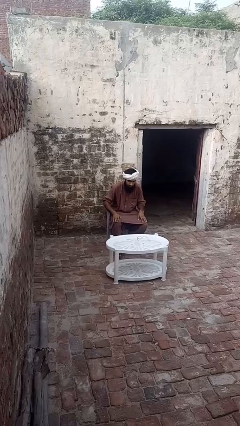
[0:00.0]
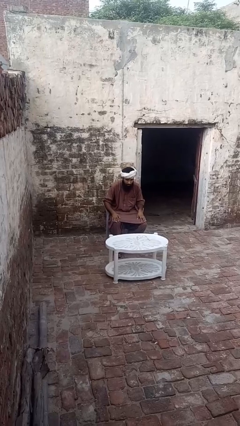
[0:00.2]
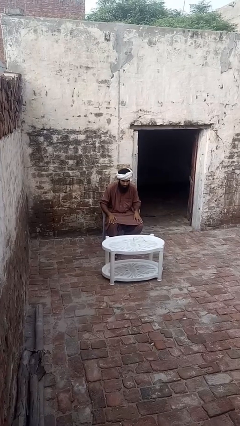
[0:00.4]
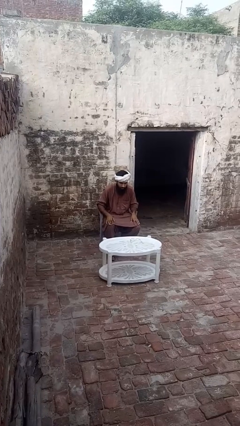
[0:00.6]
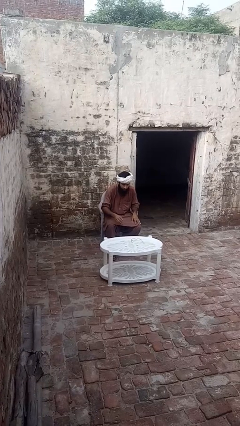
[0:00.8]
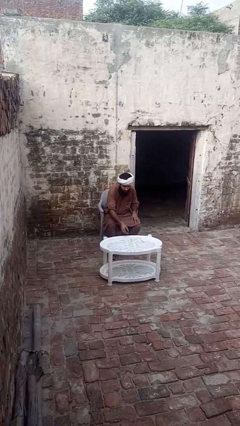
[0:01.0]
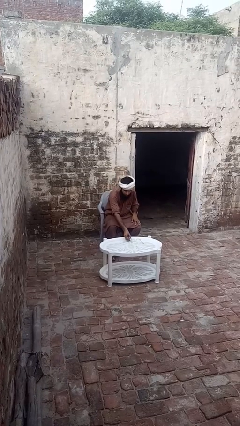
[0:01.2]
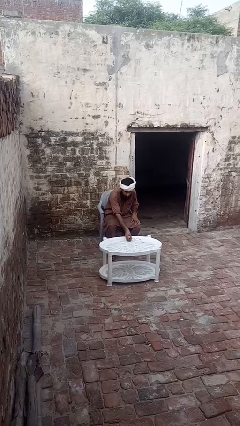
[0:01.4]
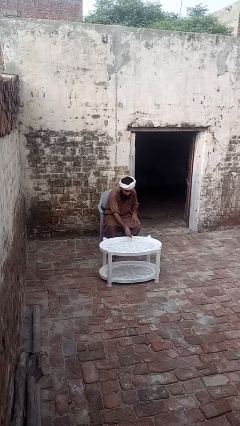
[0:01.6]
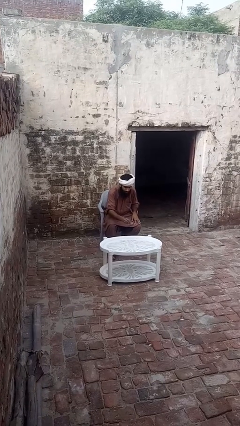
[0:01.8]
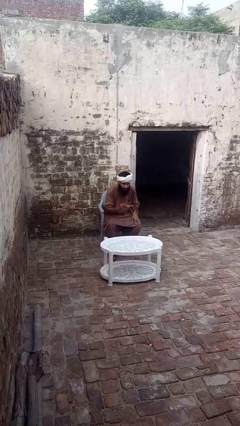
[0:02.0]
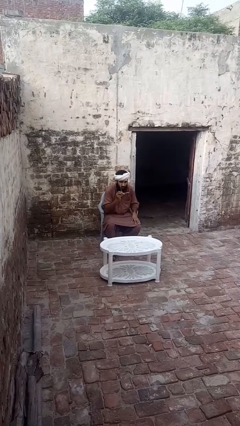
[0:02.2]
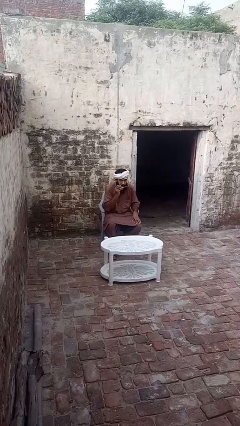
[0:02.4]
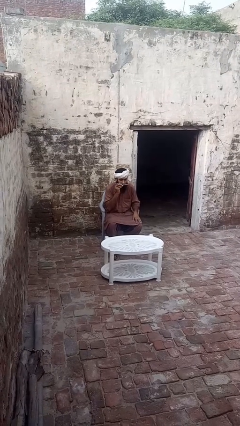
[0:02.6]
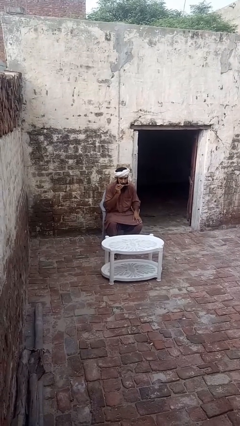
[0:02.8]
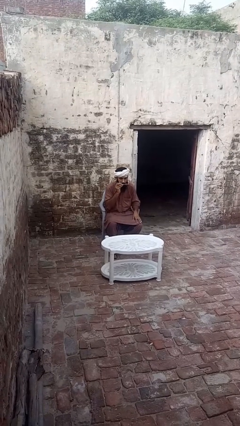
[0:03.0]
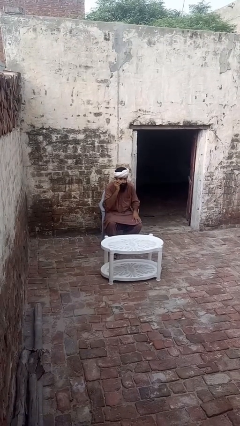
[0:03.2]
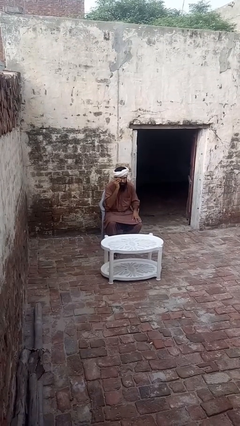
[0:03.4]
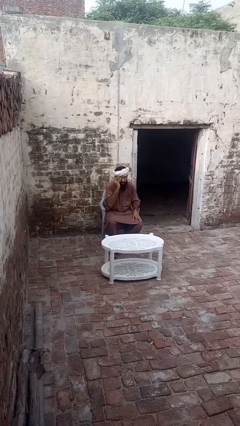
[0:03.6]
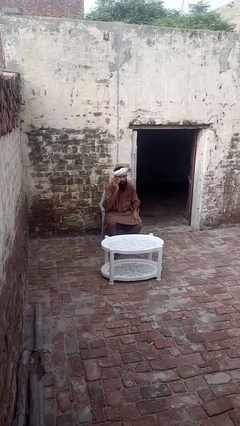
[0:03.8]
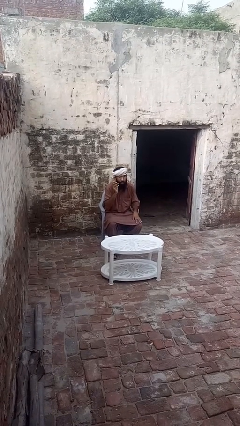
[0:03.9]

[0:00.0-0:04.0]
person puts on glasses

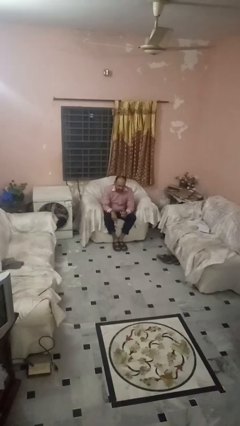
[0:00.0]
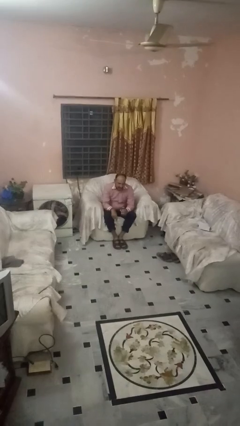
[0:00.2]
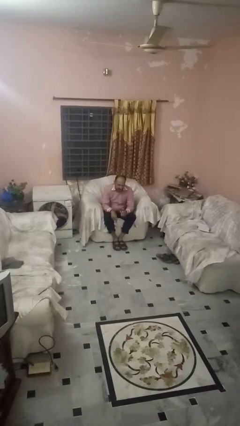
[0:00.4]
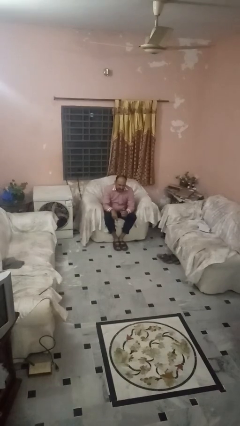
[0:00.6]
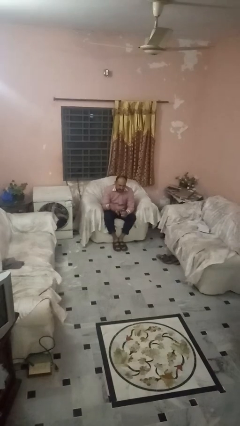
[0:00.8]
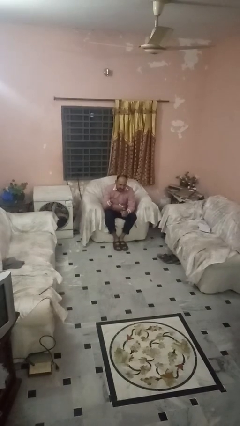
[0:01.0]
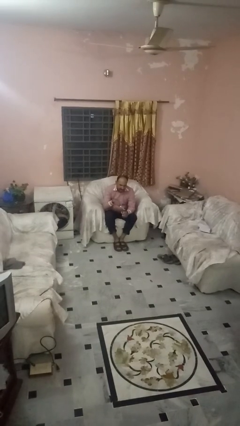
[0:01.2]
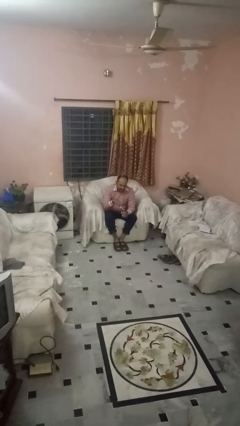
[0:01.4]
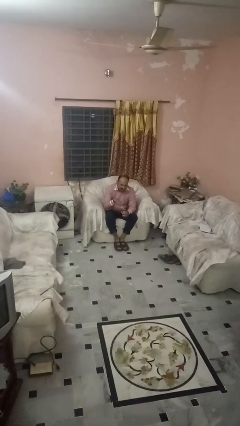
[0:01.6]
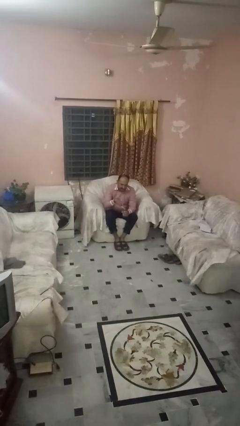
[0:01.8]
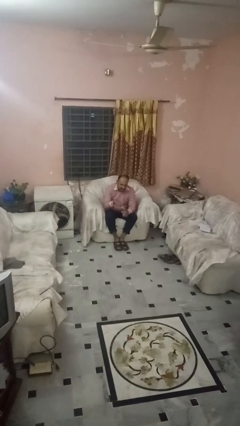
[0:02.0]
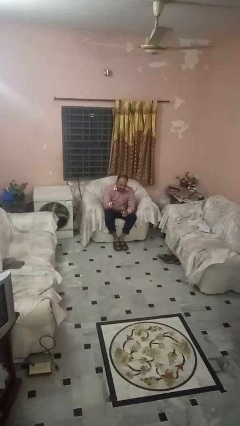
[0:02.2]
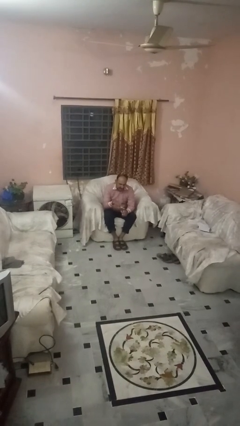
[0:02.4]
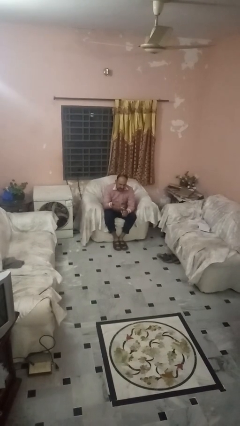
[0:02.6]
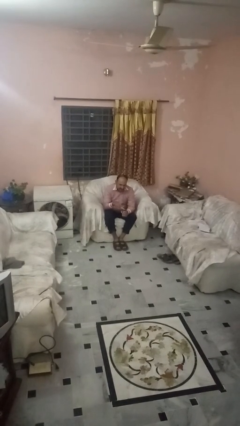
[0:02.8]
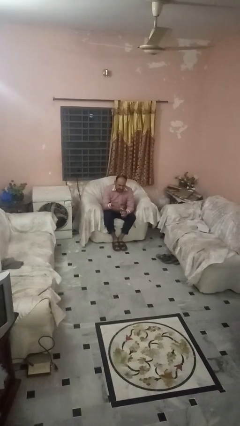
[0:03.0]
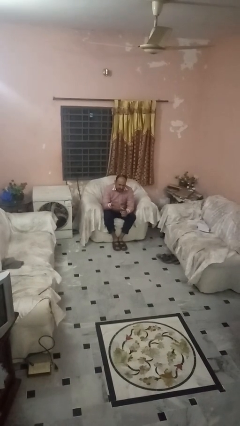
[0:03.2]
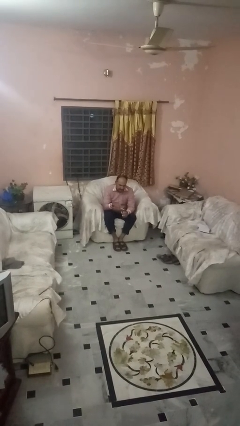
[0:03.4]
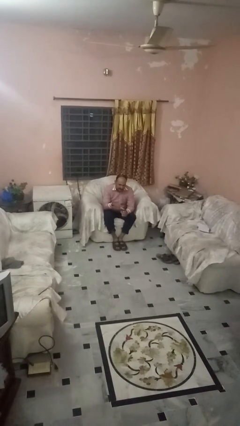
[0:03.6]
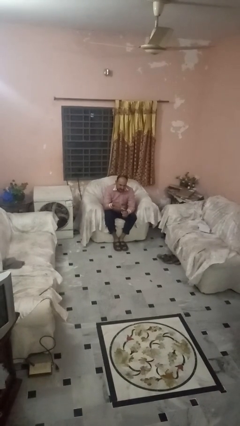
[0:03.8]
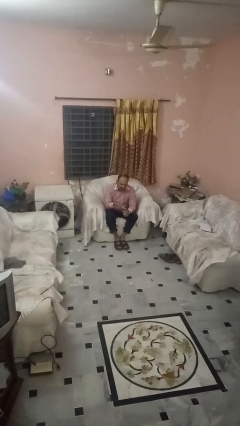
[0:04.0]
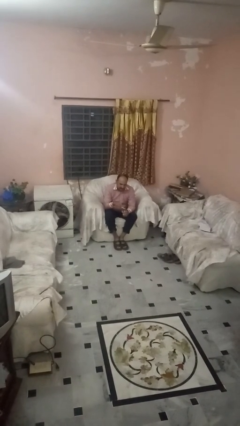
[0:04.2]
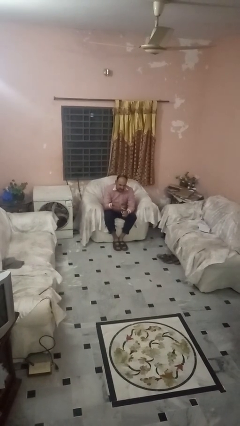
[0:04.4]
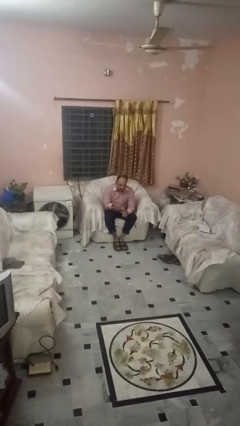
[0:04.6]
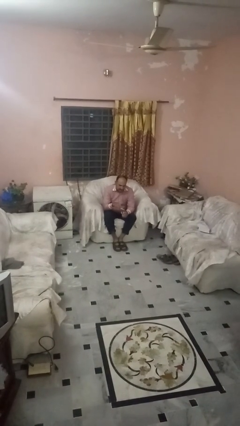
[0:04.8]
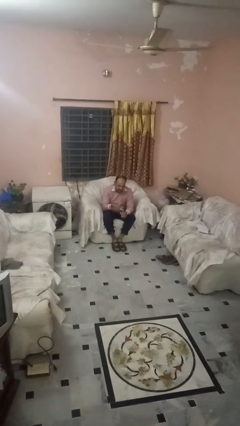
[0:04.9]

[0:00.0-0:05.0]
person opens can with can opener

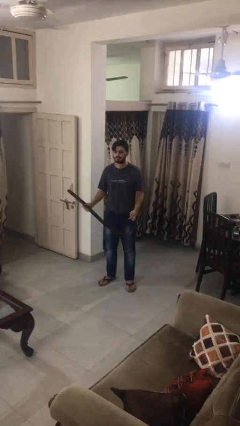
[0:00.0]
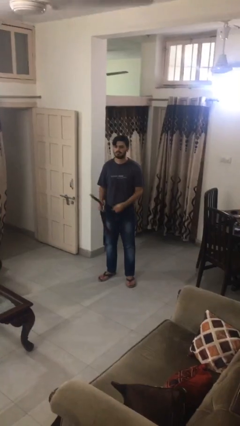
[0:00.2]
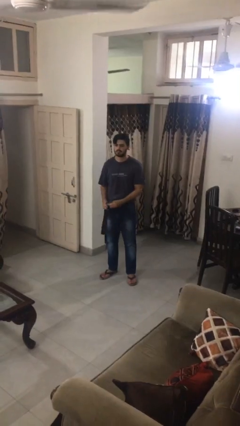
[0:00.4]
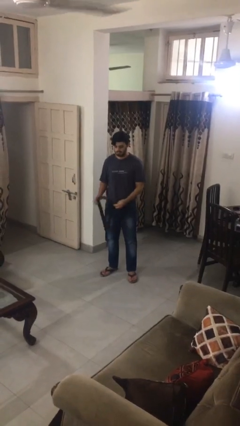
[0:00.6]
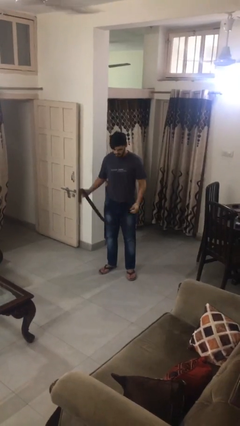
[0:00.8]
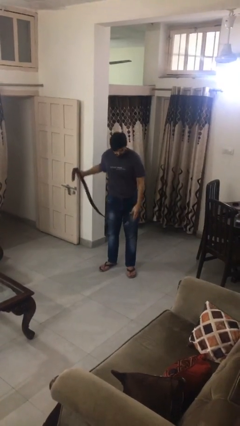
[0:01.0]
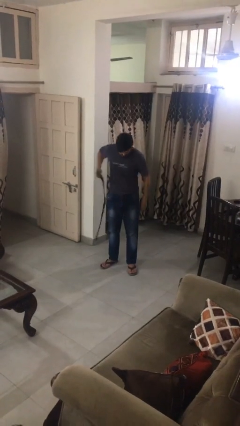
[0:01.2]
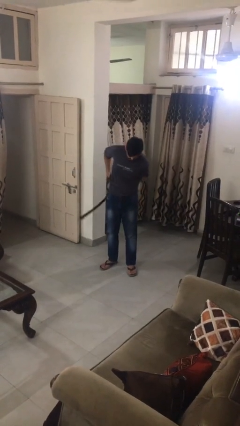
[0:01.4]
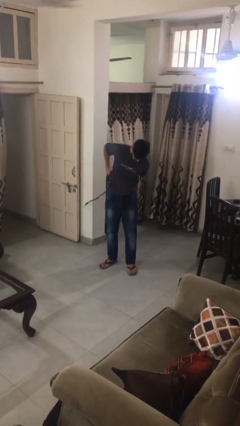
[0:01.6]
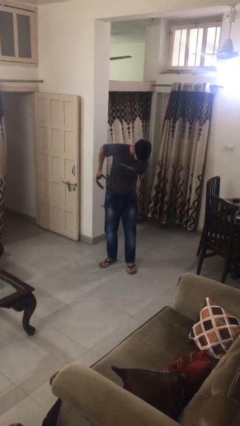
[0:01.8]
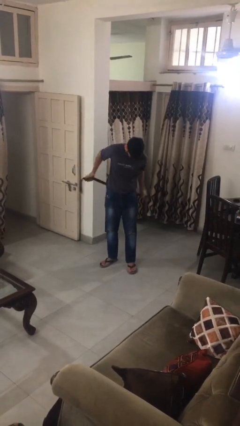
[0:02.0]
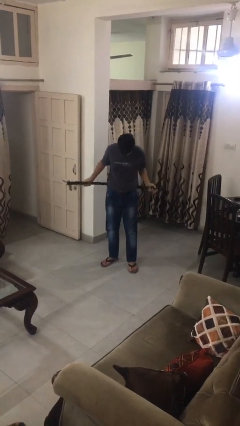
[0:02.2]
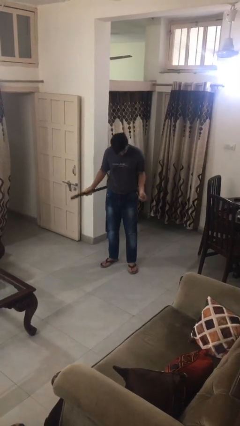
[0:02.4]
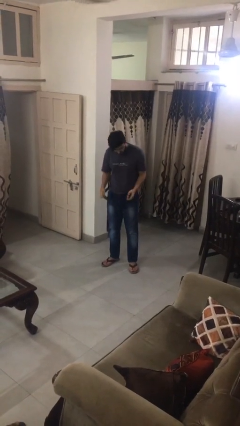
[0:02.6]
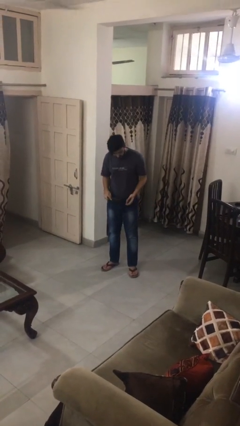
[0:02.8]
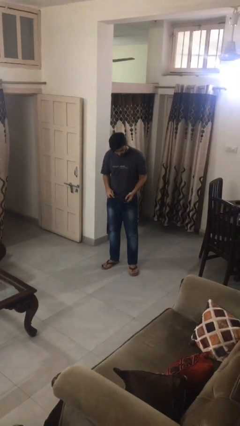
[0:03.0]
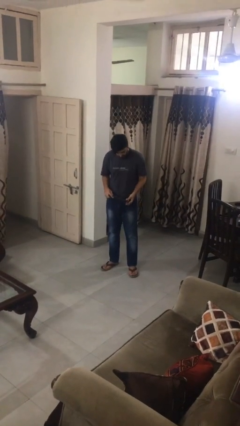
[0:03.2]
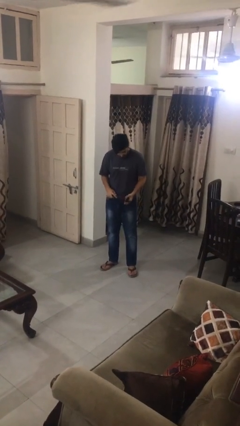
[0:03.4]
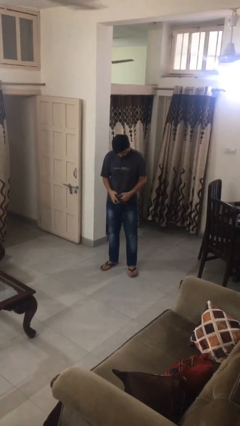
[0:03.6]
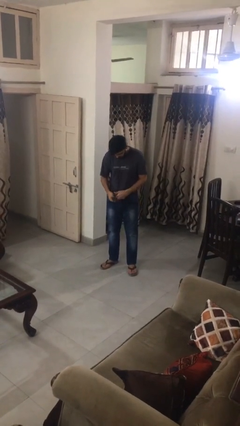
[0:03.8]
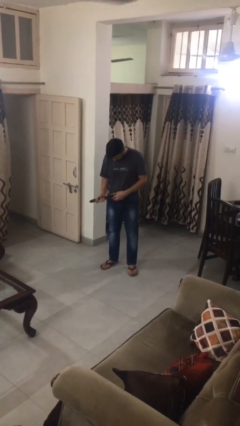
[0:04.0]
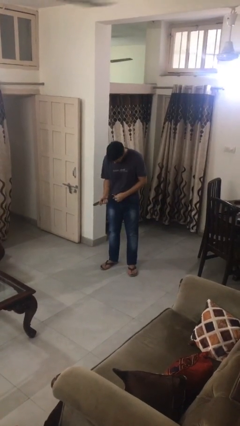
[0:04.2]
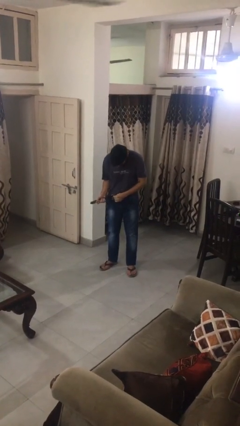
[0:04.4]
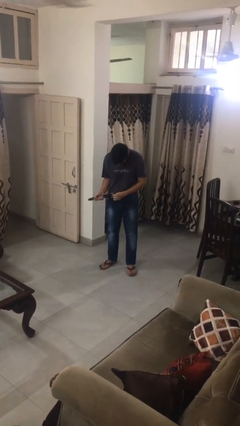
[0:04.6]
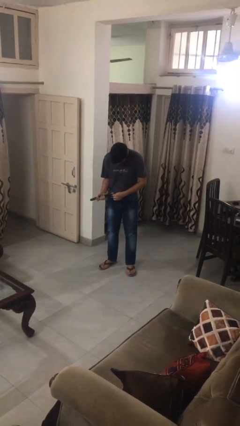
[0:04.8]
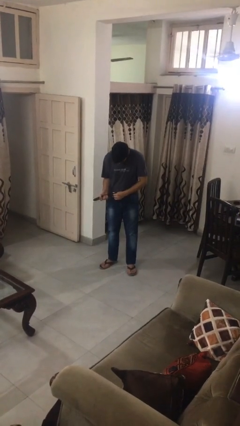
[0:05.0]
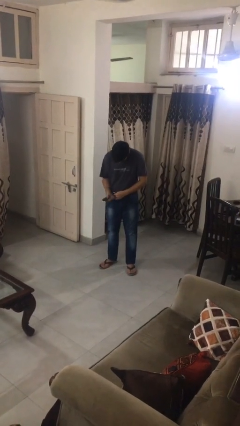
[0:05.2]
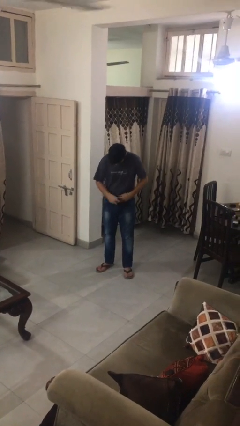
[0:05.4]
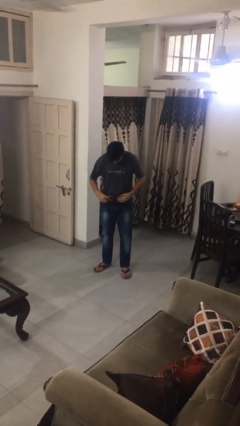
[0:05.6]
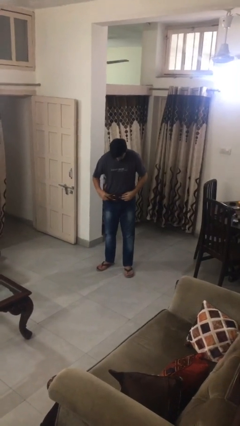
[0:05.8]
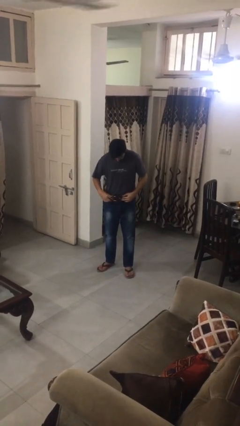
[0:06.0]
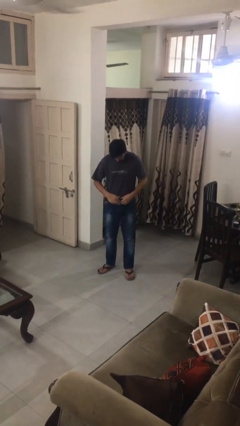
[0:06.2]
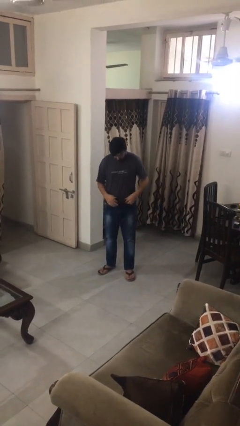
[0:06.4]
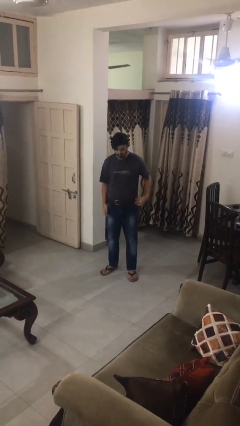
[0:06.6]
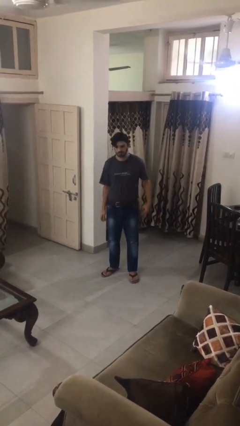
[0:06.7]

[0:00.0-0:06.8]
person puts on belt

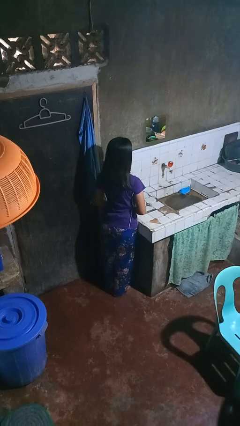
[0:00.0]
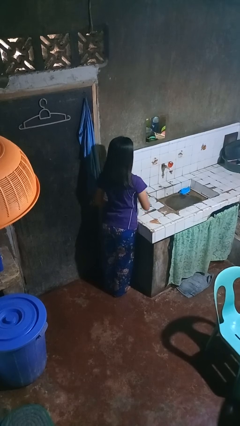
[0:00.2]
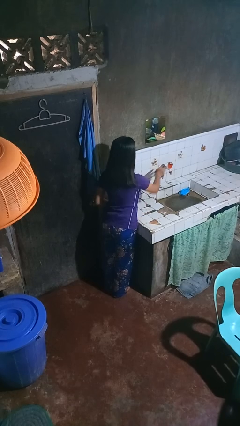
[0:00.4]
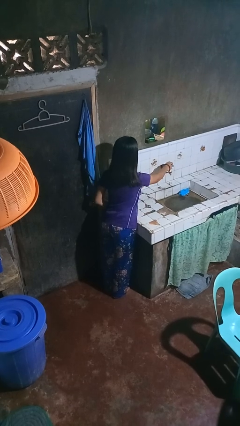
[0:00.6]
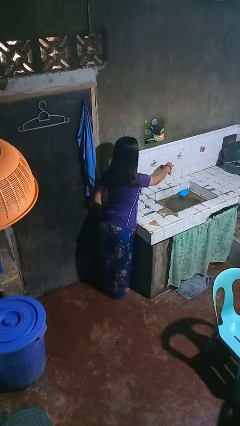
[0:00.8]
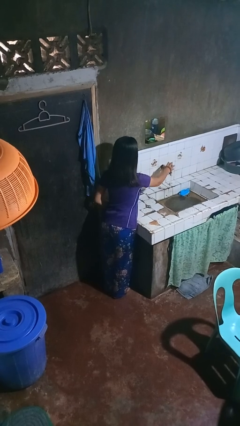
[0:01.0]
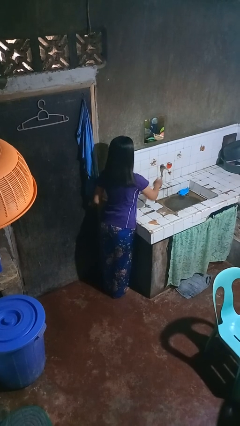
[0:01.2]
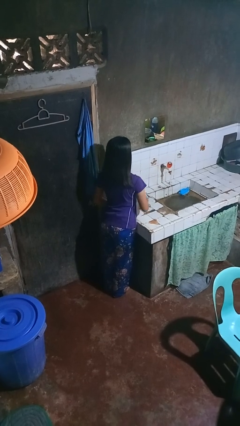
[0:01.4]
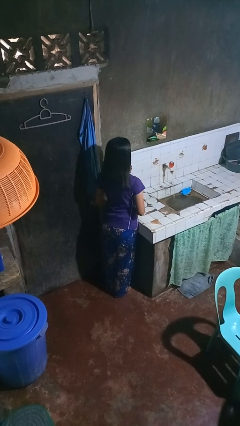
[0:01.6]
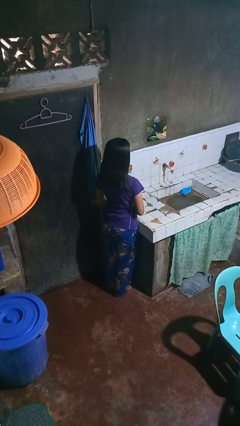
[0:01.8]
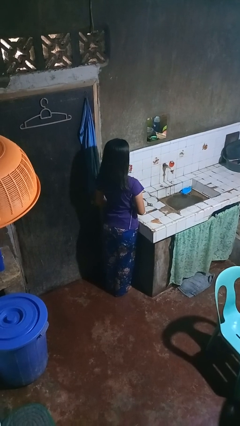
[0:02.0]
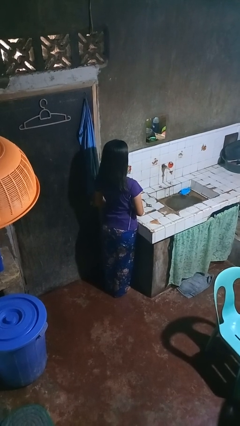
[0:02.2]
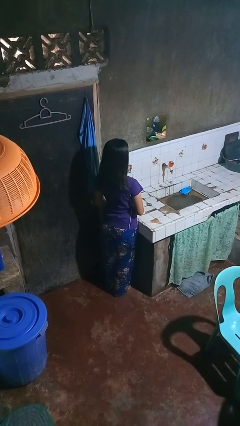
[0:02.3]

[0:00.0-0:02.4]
person turns on faucet
